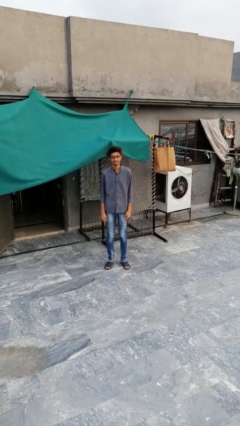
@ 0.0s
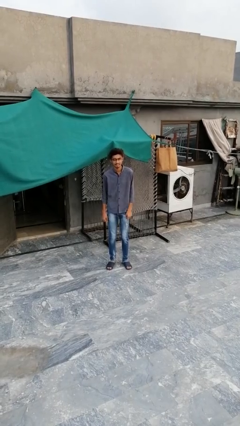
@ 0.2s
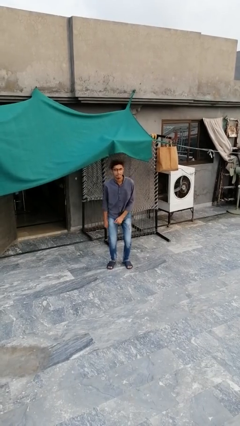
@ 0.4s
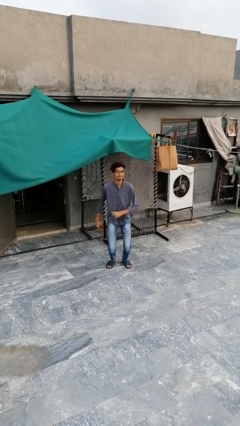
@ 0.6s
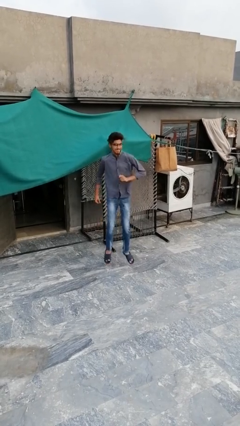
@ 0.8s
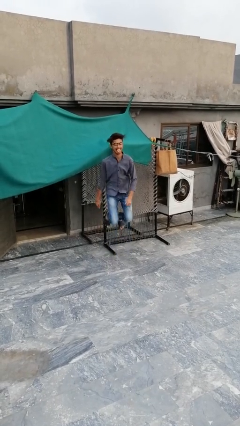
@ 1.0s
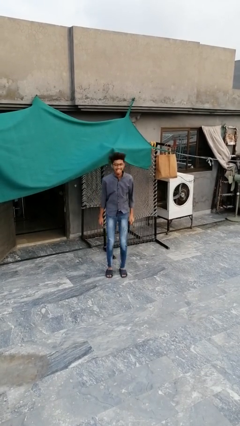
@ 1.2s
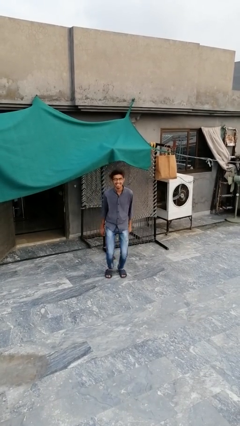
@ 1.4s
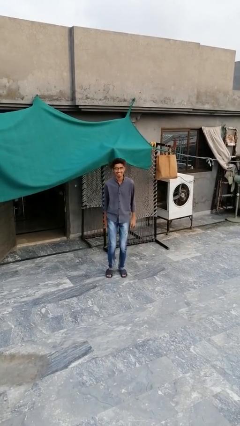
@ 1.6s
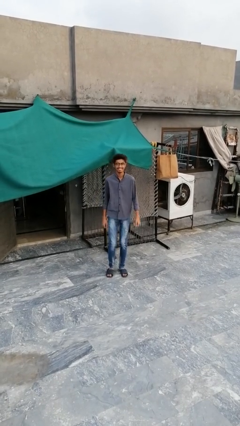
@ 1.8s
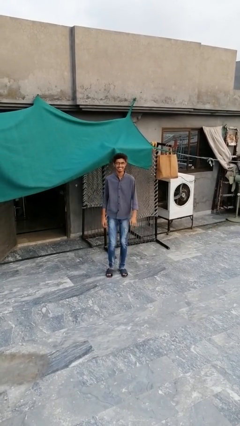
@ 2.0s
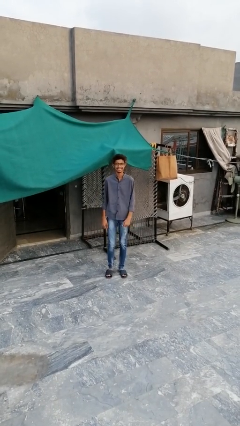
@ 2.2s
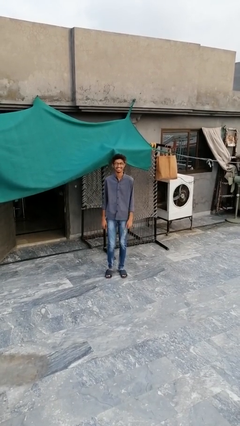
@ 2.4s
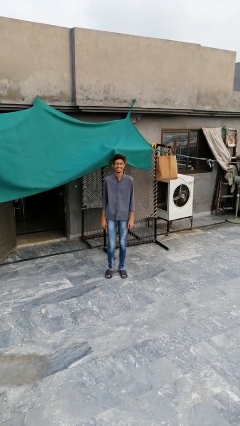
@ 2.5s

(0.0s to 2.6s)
person jumps

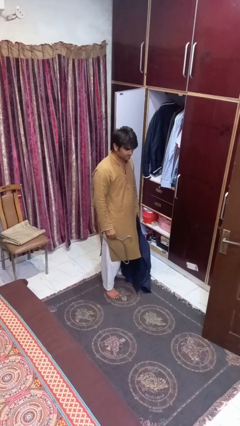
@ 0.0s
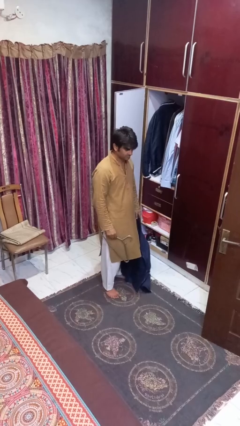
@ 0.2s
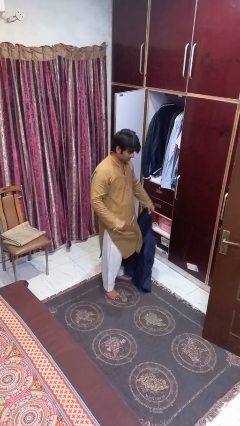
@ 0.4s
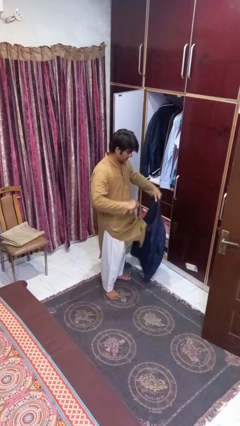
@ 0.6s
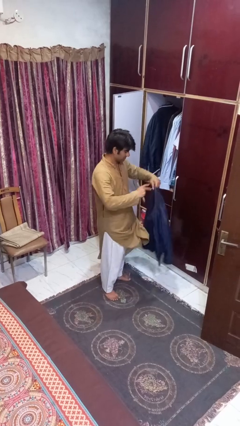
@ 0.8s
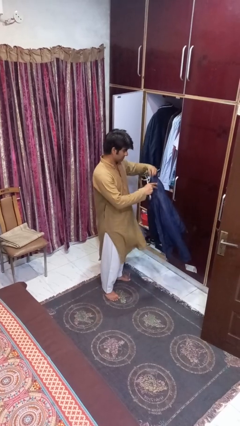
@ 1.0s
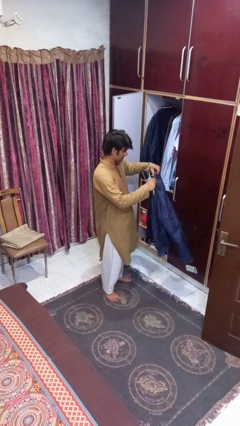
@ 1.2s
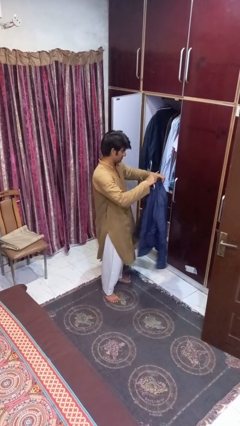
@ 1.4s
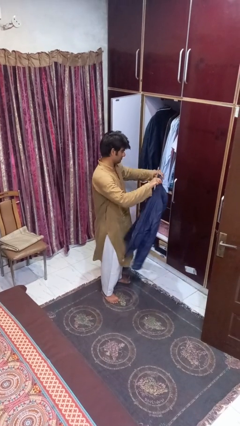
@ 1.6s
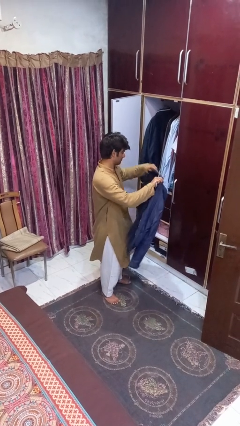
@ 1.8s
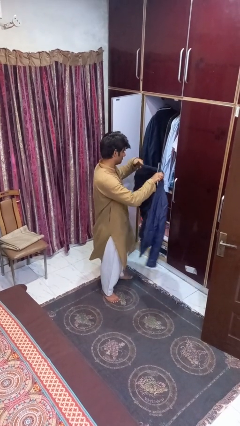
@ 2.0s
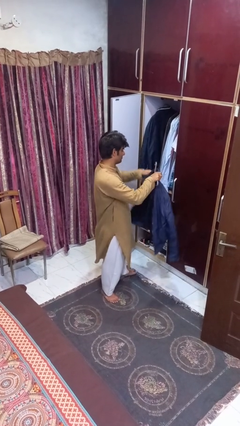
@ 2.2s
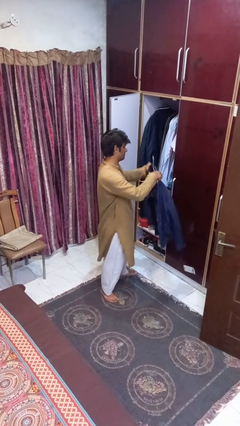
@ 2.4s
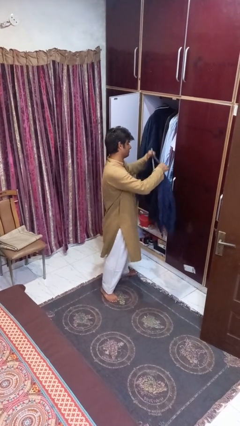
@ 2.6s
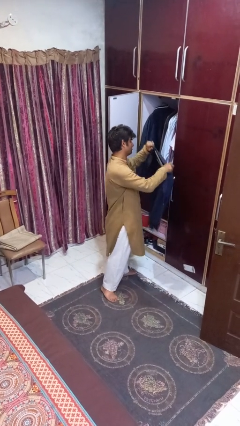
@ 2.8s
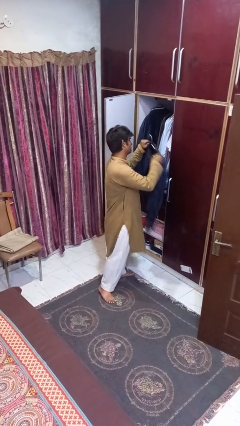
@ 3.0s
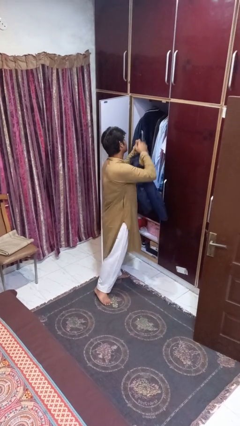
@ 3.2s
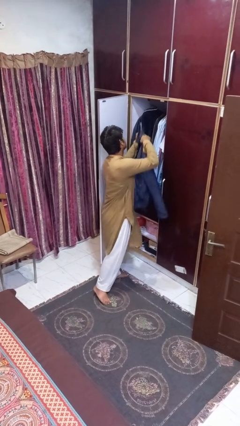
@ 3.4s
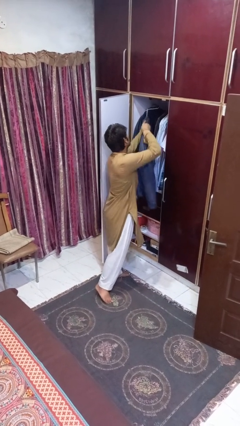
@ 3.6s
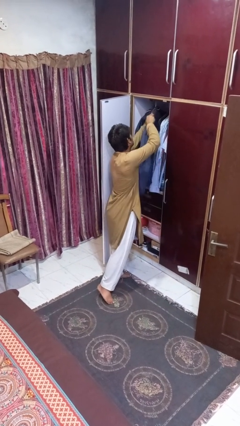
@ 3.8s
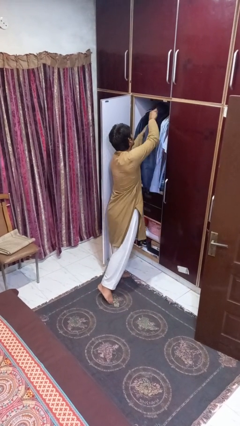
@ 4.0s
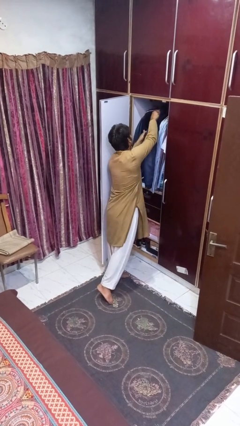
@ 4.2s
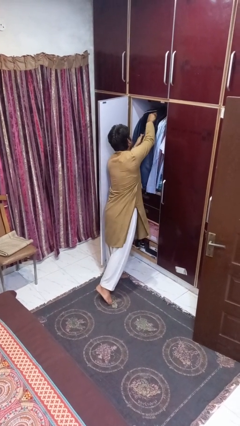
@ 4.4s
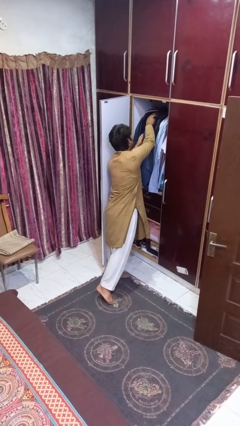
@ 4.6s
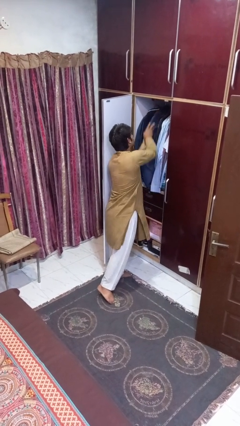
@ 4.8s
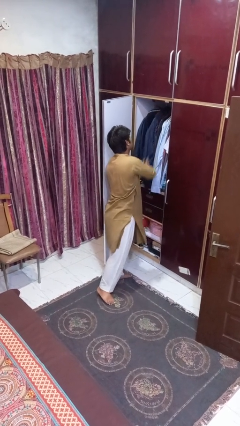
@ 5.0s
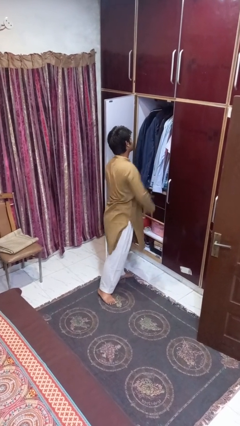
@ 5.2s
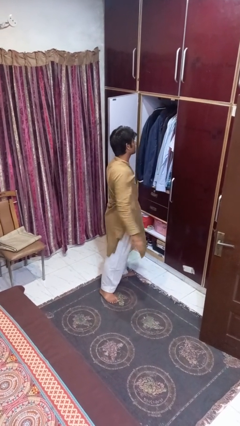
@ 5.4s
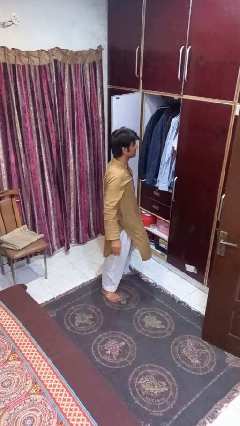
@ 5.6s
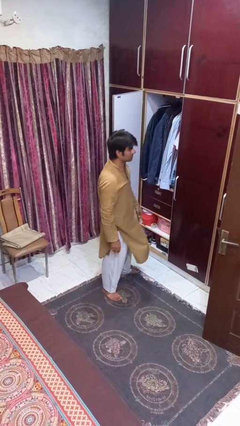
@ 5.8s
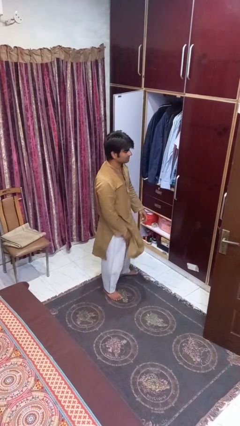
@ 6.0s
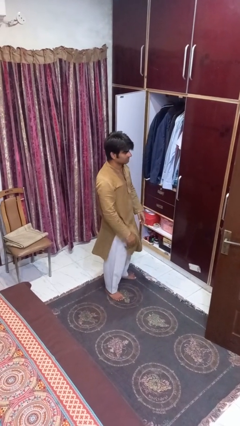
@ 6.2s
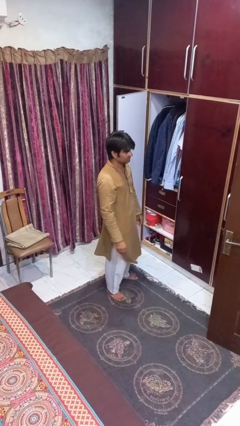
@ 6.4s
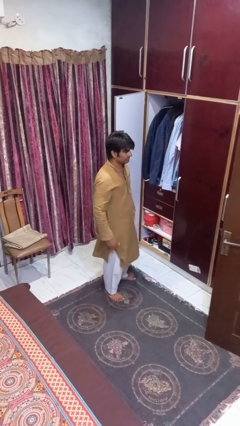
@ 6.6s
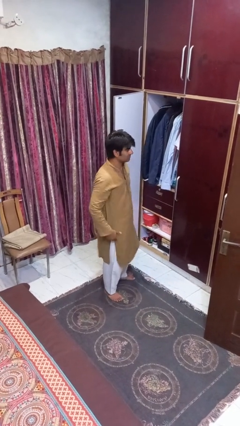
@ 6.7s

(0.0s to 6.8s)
person puts clothes into closet

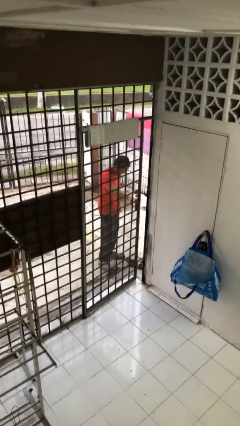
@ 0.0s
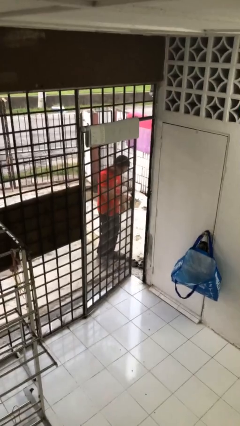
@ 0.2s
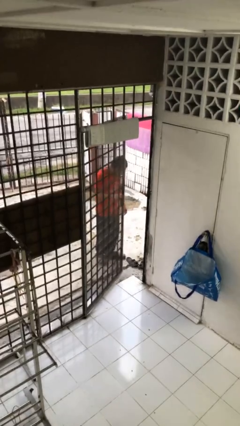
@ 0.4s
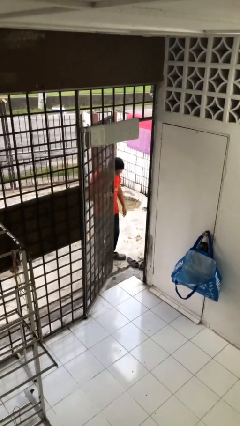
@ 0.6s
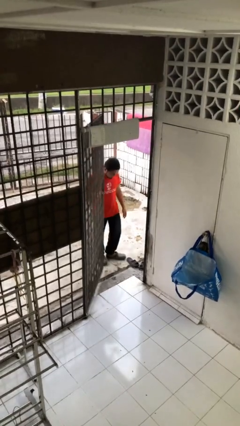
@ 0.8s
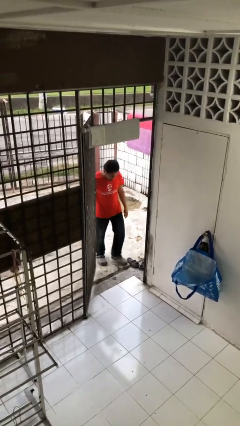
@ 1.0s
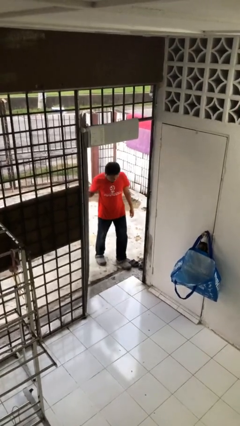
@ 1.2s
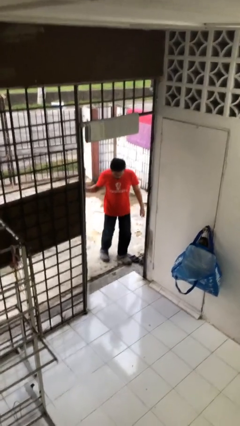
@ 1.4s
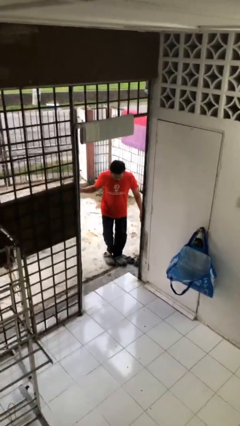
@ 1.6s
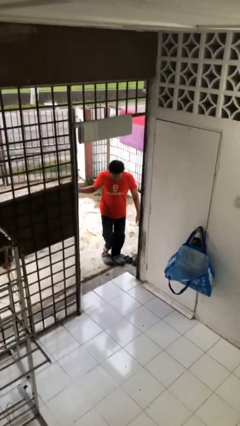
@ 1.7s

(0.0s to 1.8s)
person opens facility door

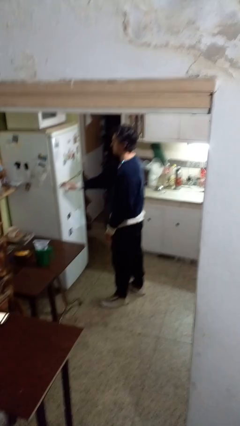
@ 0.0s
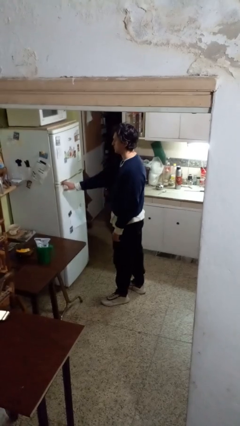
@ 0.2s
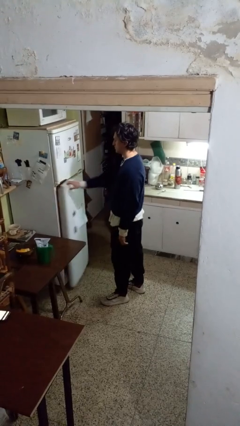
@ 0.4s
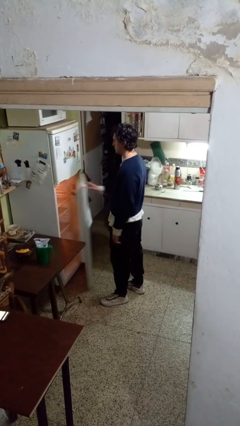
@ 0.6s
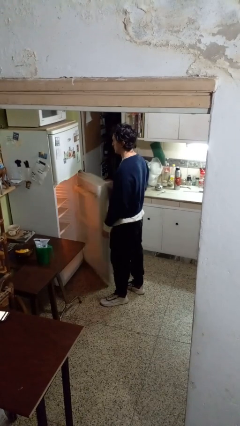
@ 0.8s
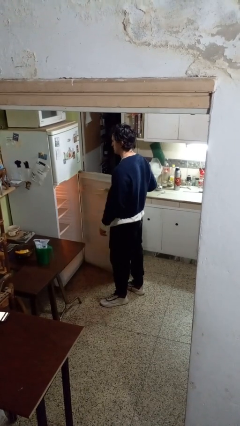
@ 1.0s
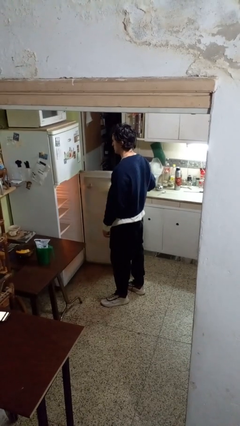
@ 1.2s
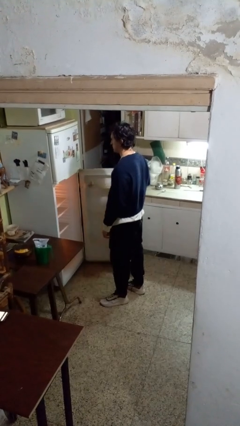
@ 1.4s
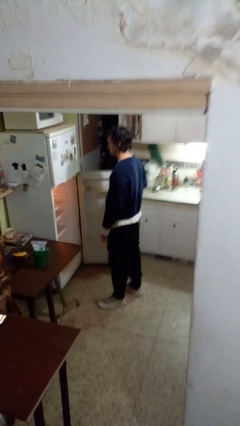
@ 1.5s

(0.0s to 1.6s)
person opens refrigerator

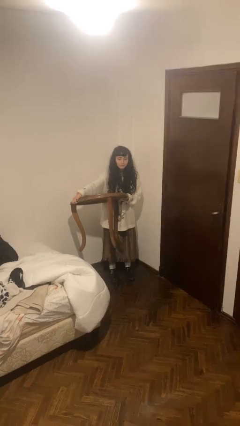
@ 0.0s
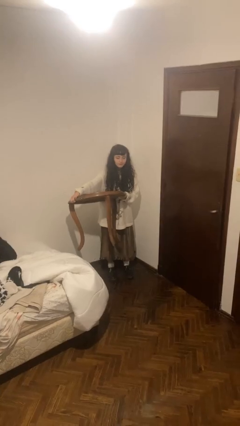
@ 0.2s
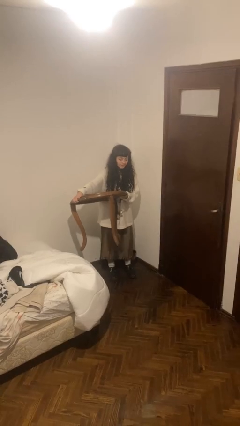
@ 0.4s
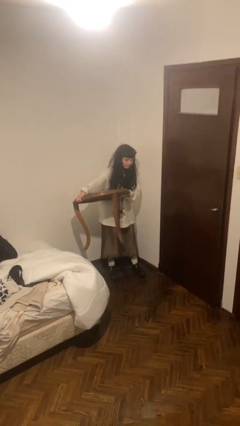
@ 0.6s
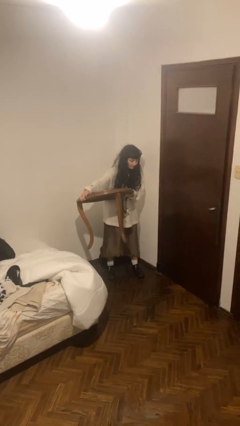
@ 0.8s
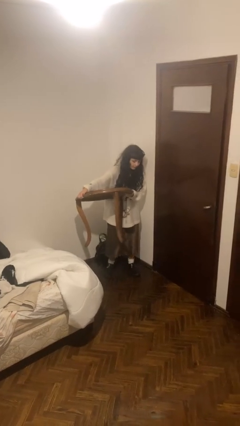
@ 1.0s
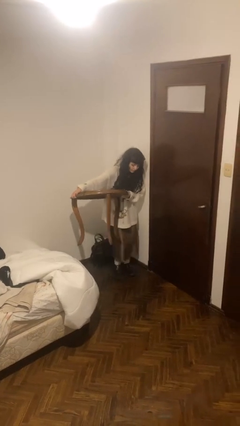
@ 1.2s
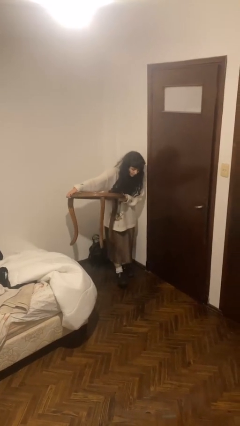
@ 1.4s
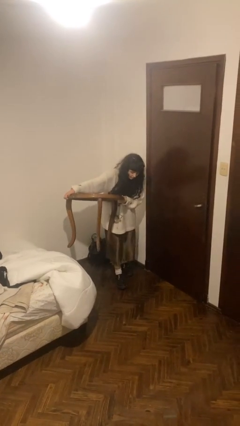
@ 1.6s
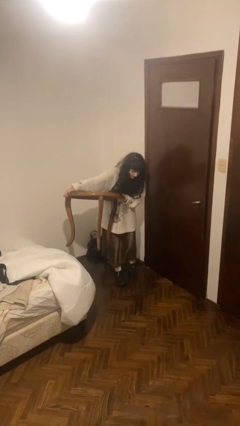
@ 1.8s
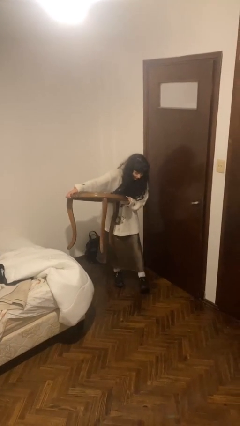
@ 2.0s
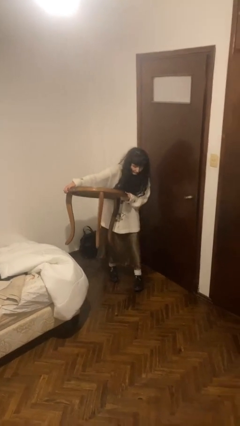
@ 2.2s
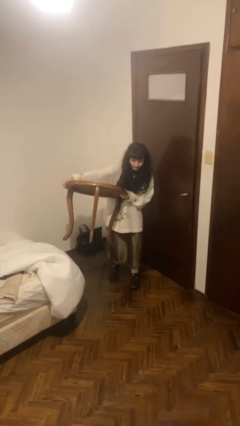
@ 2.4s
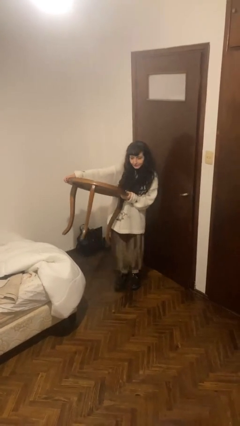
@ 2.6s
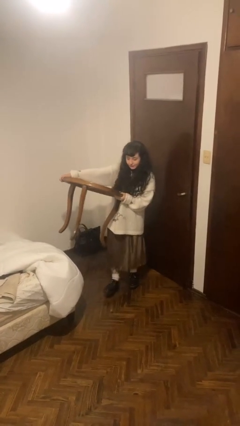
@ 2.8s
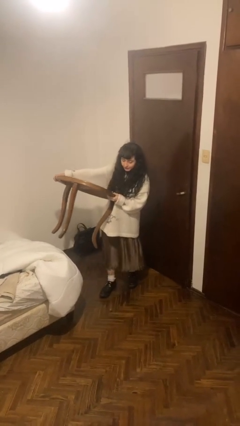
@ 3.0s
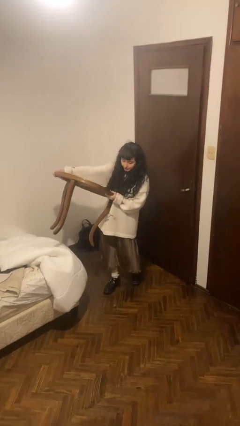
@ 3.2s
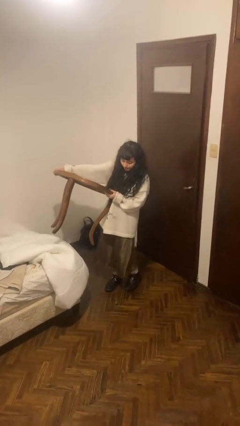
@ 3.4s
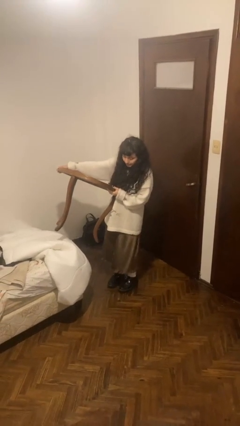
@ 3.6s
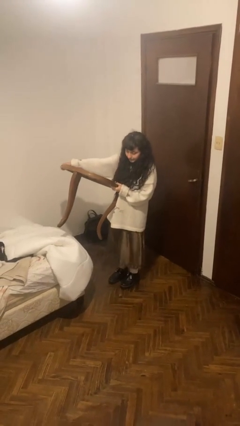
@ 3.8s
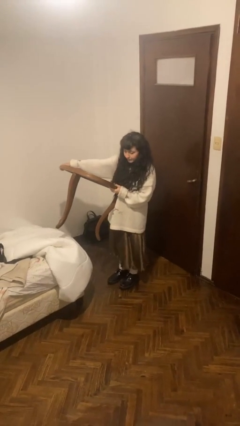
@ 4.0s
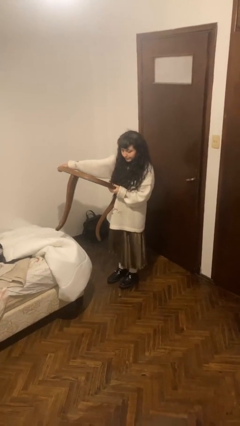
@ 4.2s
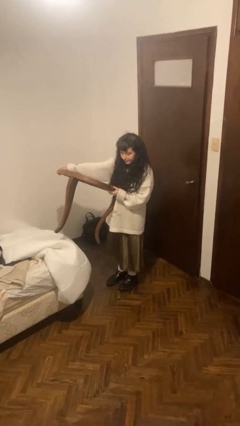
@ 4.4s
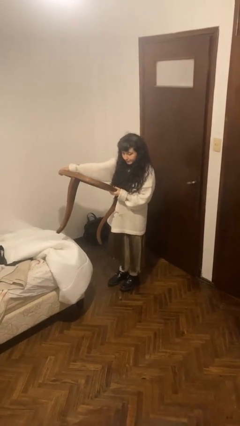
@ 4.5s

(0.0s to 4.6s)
person carries furniture
